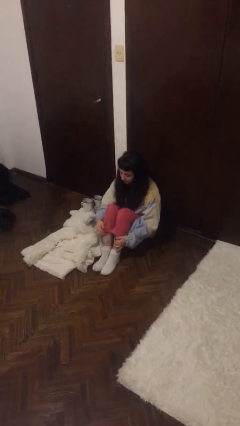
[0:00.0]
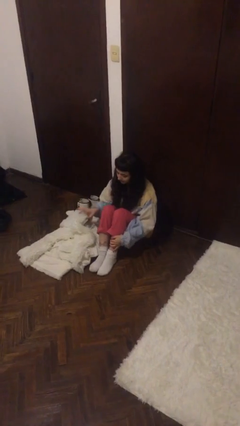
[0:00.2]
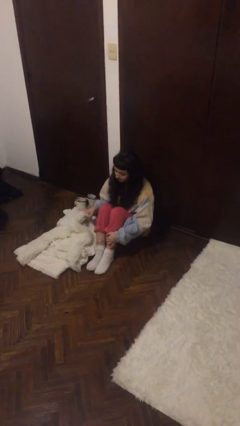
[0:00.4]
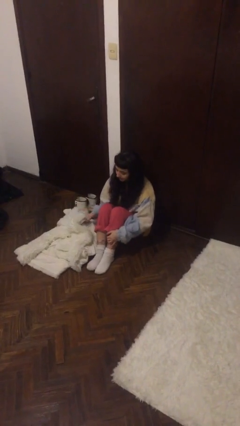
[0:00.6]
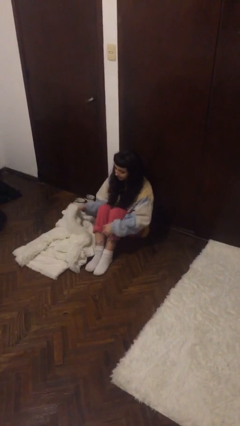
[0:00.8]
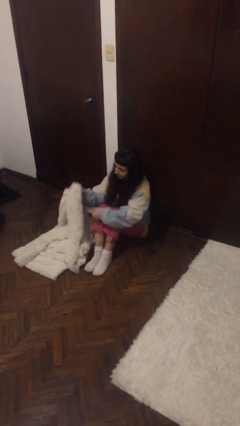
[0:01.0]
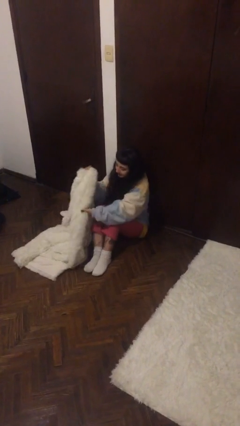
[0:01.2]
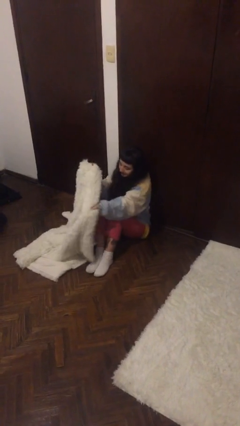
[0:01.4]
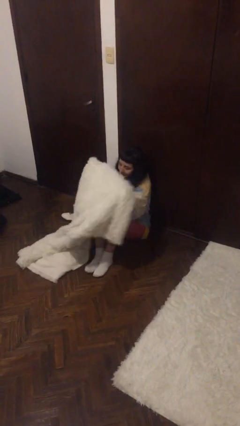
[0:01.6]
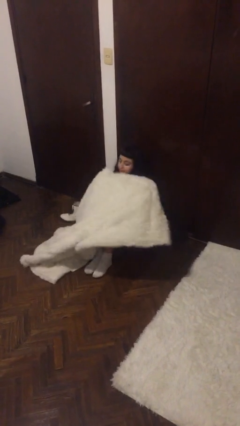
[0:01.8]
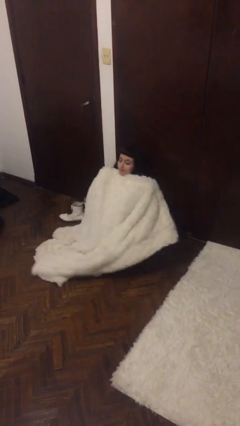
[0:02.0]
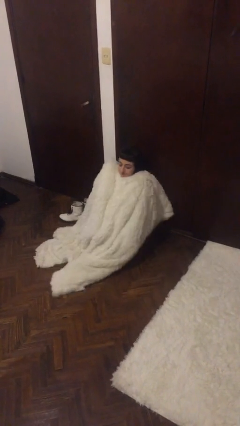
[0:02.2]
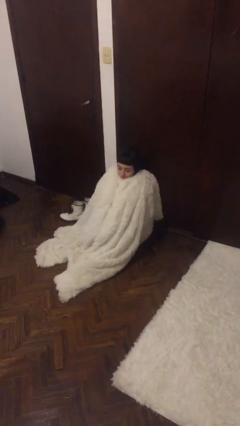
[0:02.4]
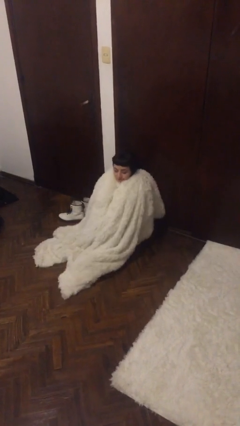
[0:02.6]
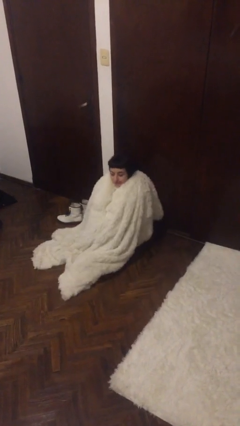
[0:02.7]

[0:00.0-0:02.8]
person covers with blanket

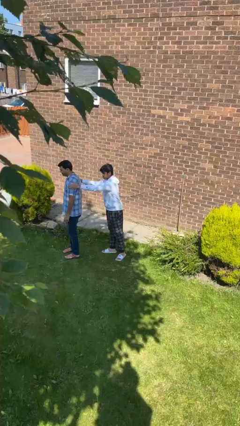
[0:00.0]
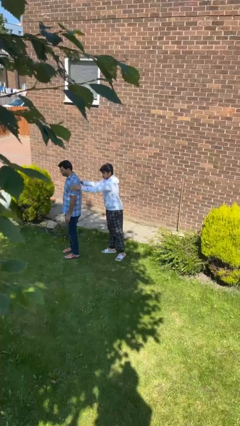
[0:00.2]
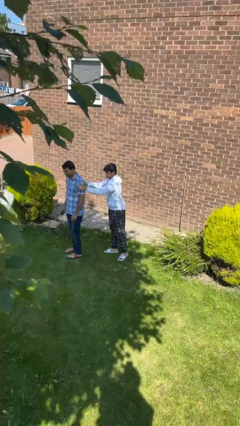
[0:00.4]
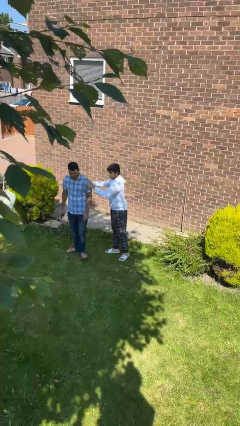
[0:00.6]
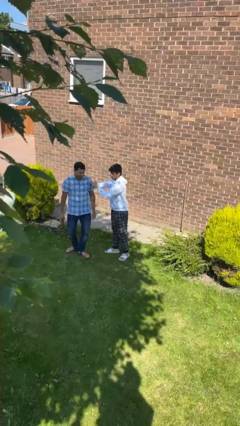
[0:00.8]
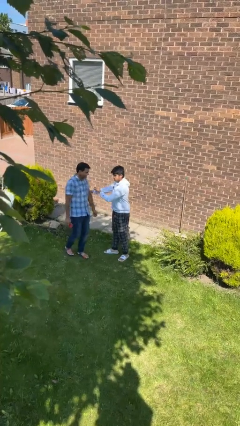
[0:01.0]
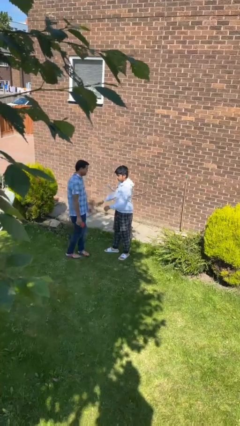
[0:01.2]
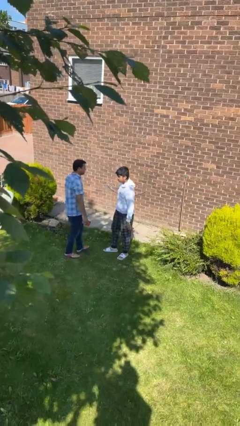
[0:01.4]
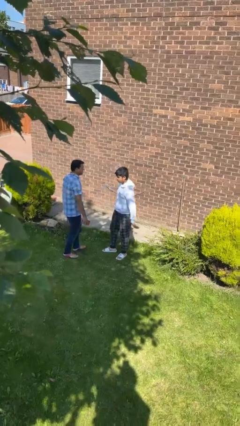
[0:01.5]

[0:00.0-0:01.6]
person spins person around

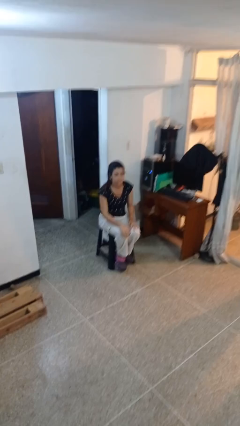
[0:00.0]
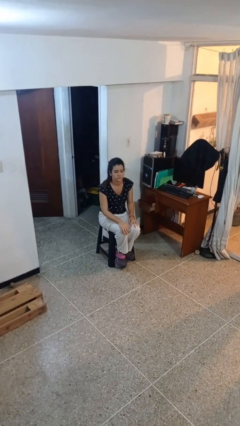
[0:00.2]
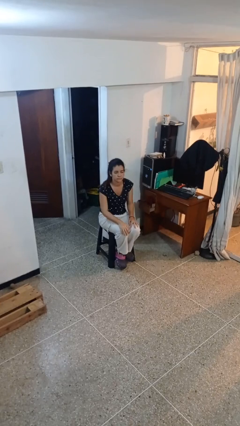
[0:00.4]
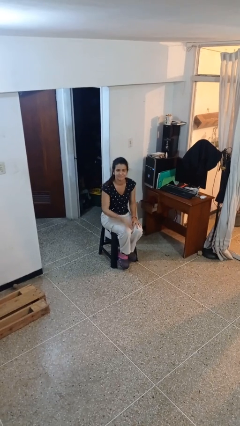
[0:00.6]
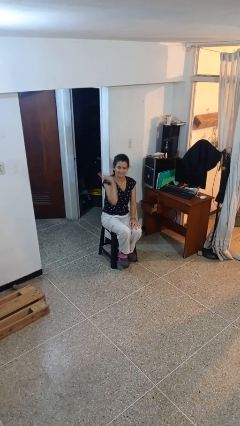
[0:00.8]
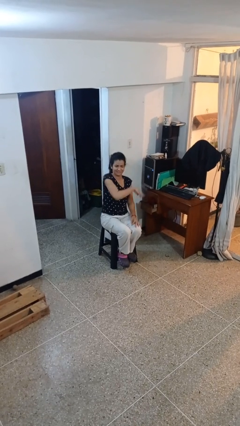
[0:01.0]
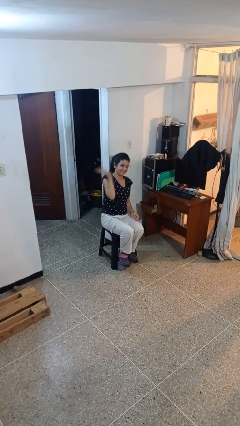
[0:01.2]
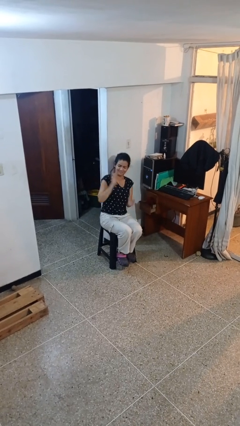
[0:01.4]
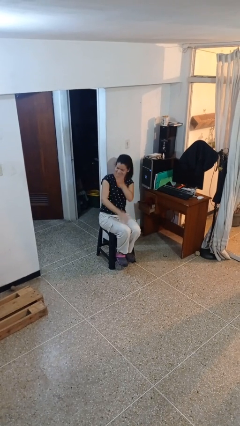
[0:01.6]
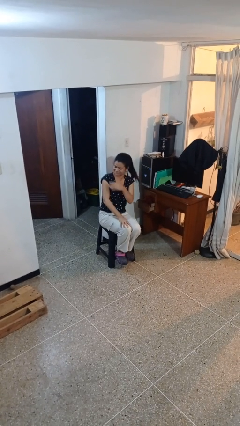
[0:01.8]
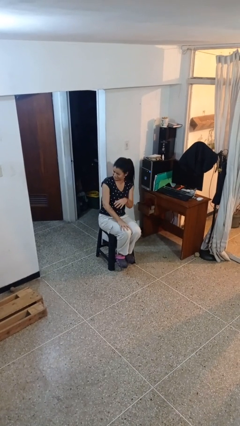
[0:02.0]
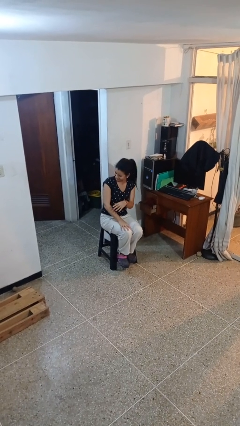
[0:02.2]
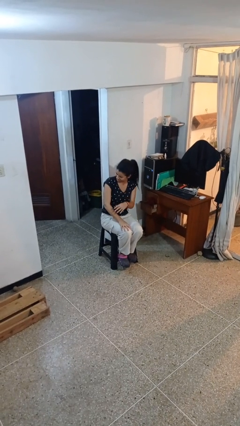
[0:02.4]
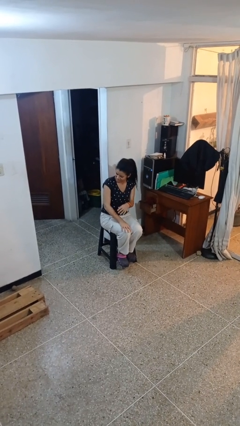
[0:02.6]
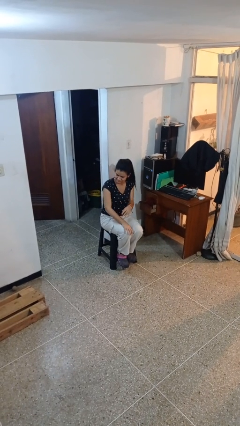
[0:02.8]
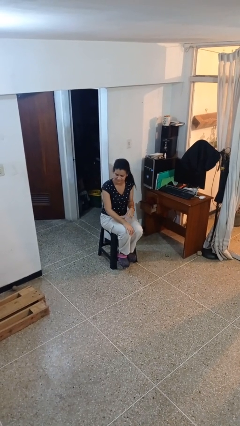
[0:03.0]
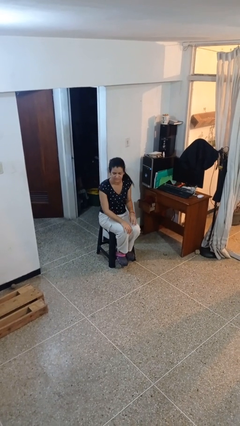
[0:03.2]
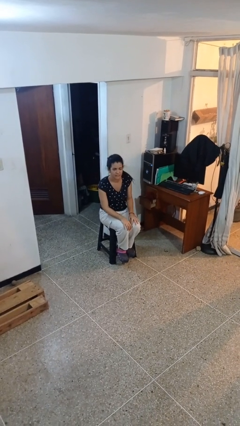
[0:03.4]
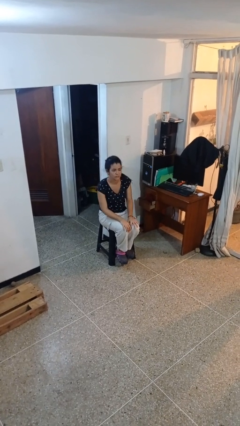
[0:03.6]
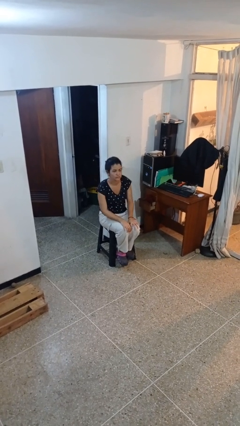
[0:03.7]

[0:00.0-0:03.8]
person swats bug

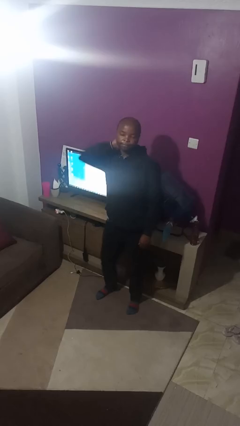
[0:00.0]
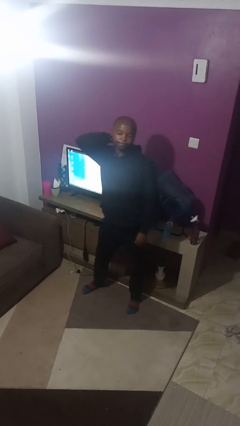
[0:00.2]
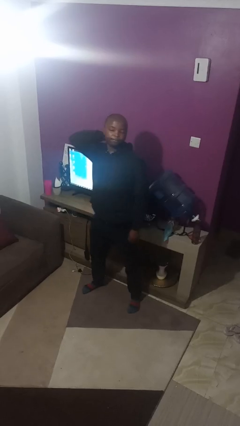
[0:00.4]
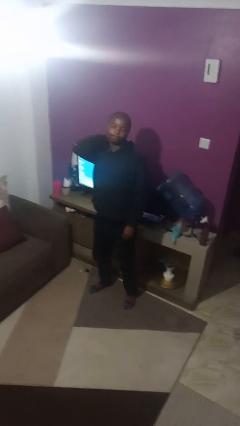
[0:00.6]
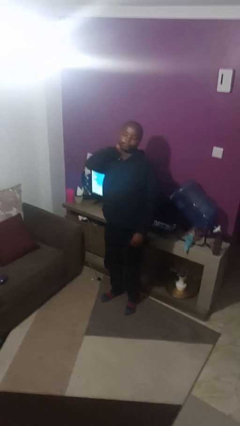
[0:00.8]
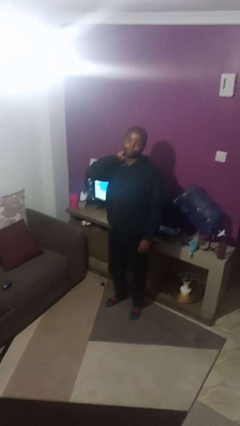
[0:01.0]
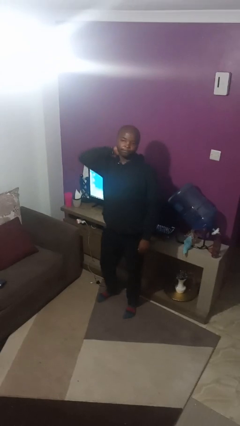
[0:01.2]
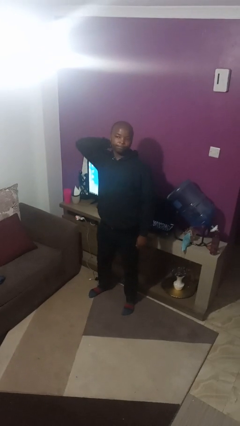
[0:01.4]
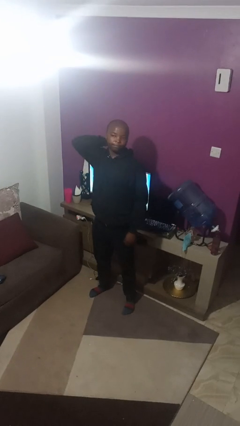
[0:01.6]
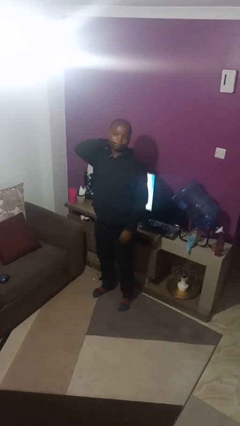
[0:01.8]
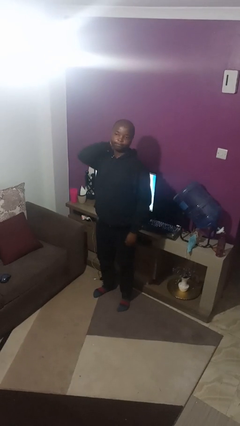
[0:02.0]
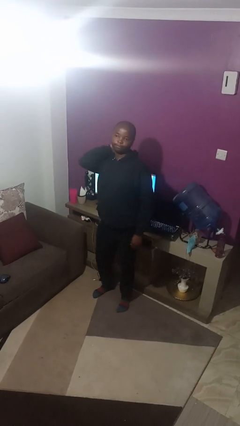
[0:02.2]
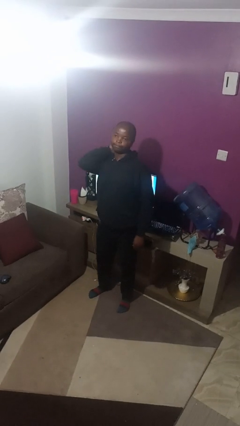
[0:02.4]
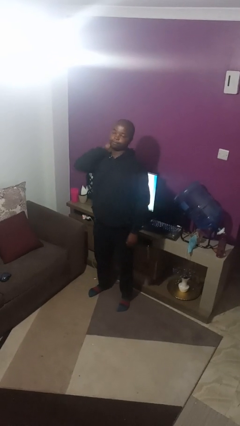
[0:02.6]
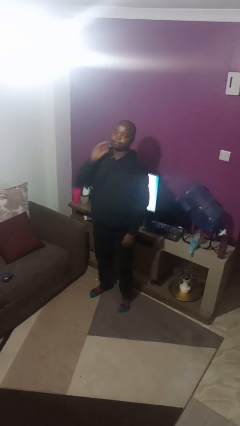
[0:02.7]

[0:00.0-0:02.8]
person rubs neck

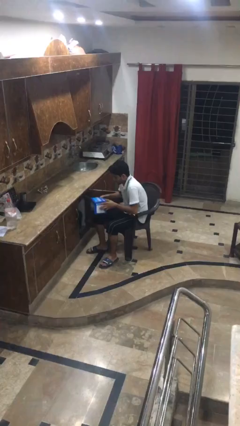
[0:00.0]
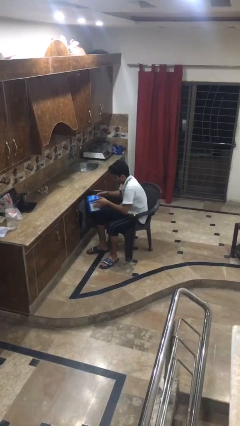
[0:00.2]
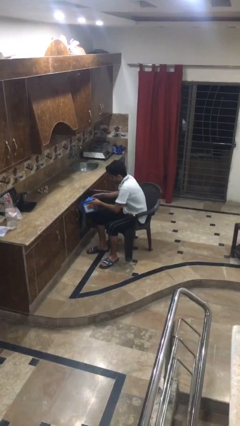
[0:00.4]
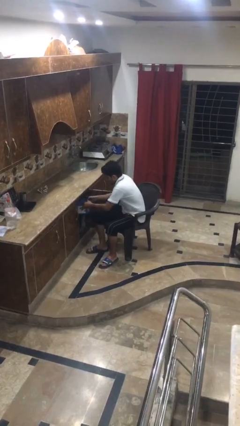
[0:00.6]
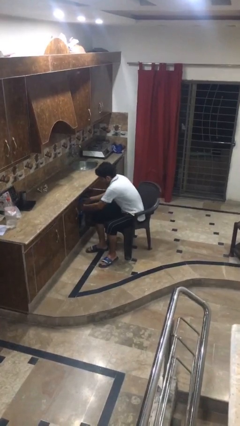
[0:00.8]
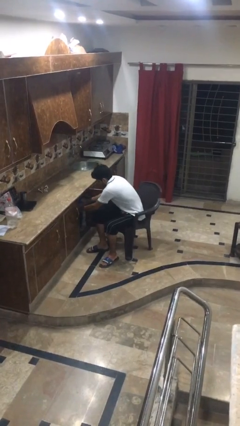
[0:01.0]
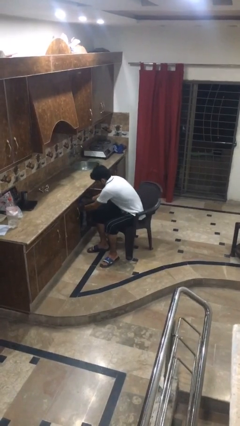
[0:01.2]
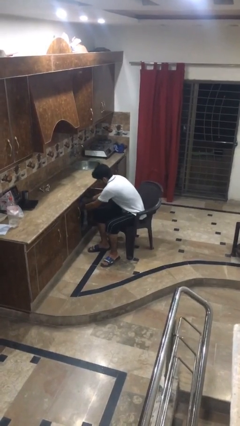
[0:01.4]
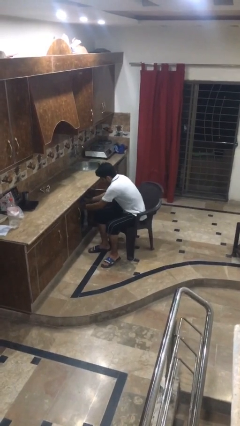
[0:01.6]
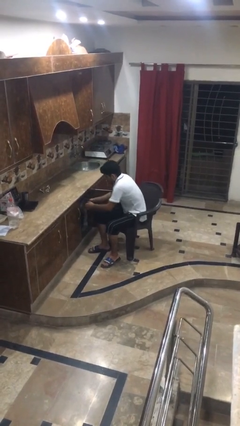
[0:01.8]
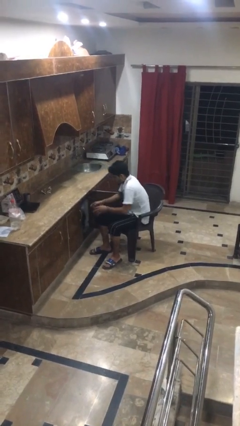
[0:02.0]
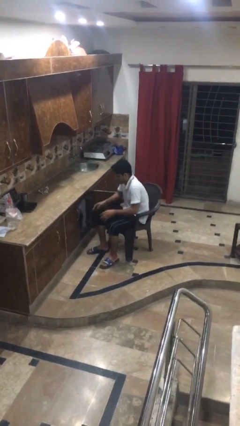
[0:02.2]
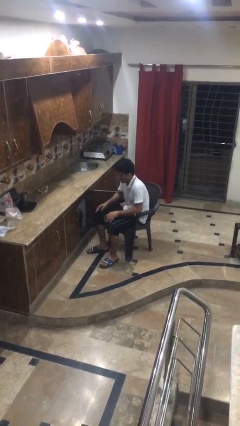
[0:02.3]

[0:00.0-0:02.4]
person puts down object into cabinet

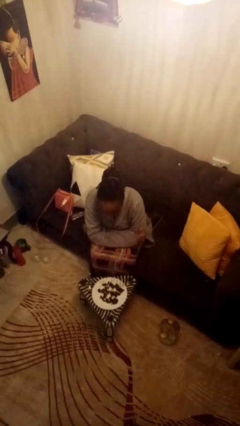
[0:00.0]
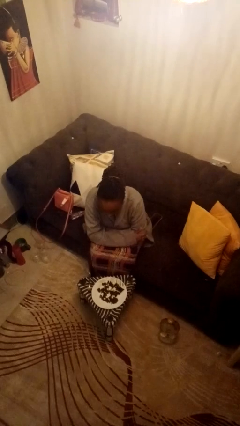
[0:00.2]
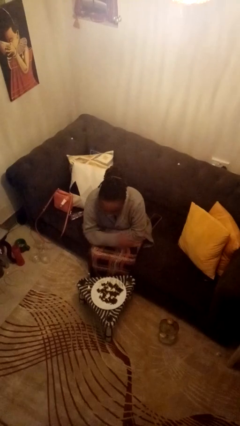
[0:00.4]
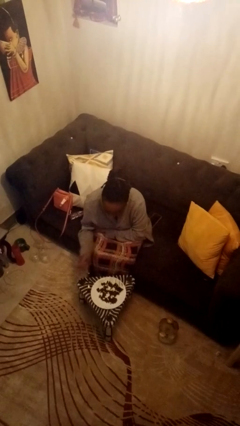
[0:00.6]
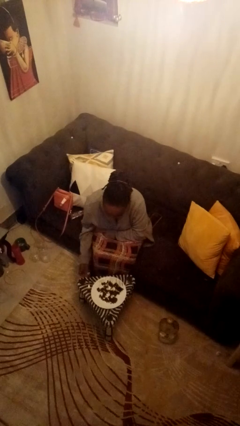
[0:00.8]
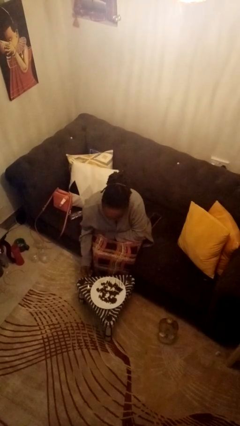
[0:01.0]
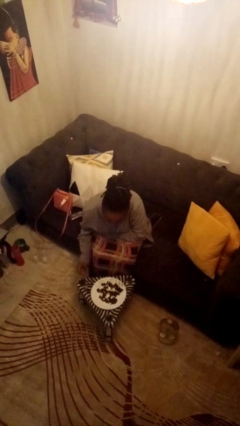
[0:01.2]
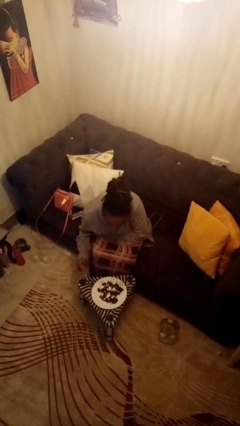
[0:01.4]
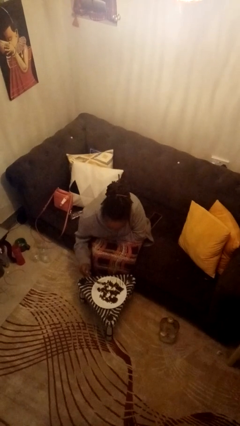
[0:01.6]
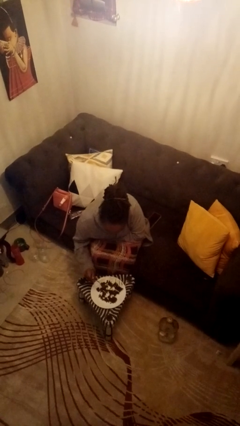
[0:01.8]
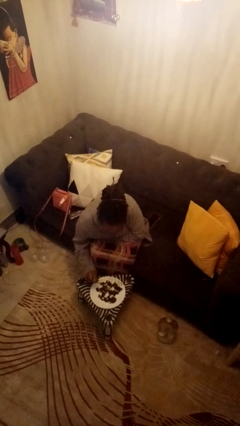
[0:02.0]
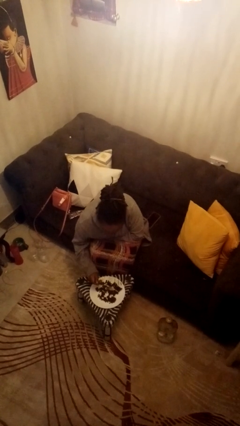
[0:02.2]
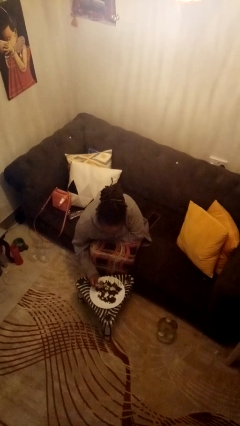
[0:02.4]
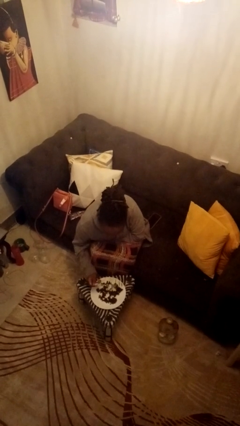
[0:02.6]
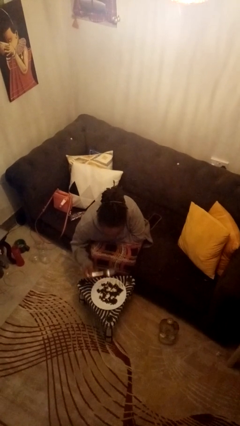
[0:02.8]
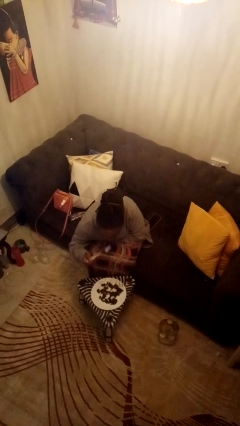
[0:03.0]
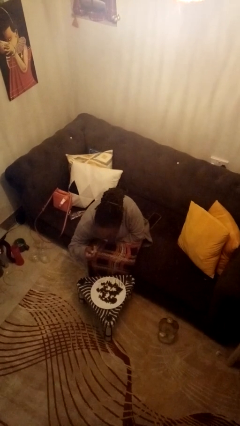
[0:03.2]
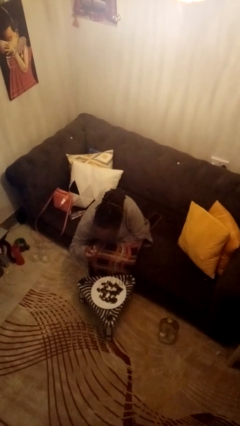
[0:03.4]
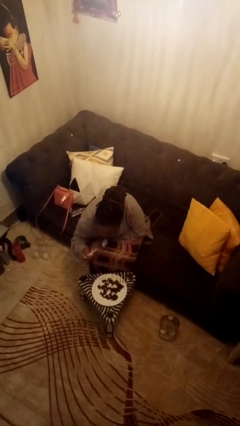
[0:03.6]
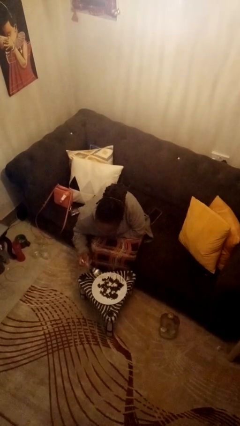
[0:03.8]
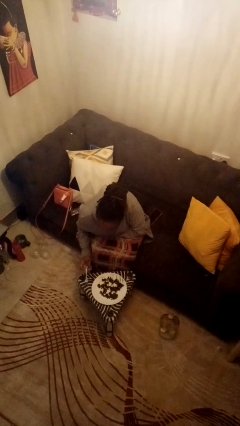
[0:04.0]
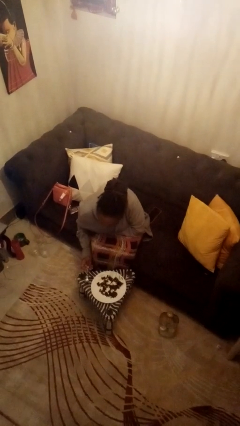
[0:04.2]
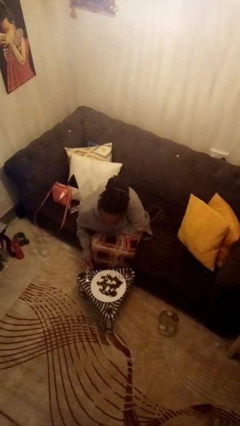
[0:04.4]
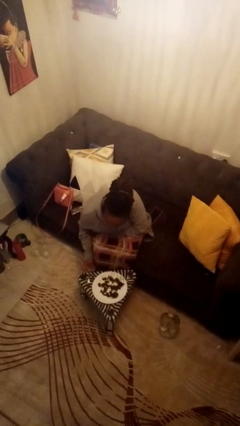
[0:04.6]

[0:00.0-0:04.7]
person eats with utensil
